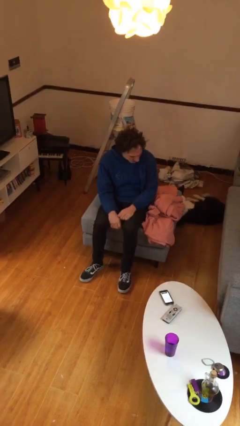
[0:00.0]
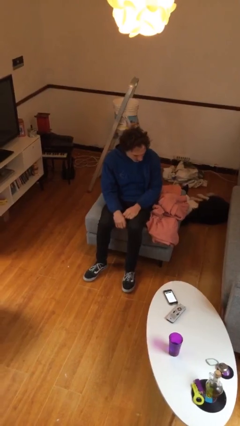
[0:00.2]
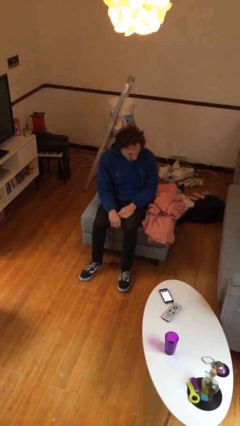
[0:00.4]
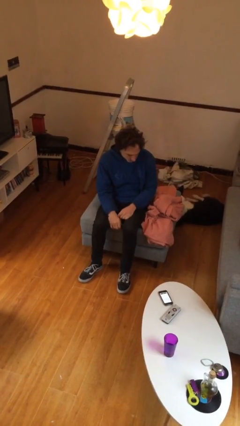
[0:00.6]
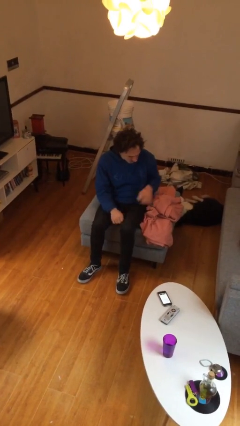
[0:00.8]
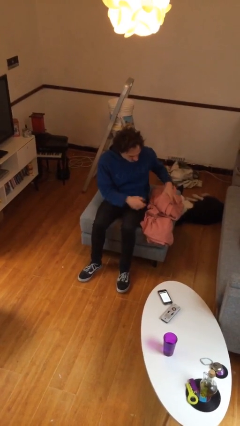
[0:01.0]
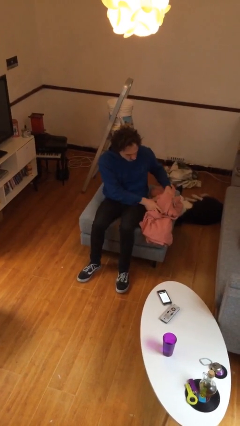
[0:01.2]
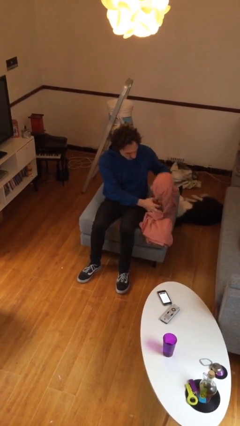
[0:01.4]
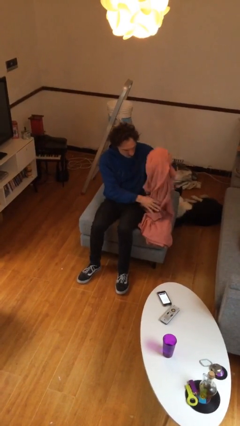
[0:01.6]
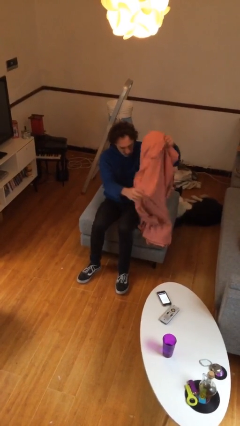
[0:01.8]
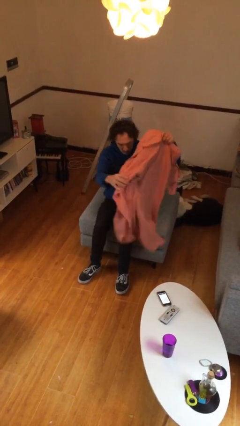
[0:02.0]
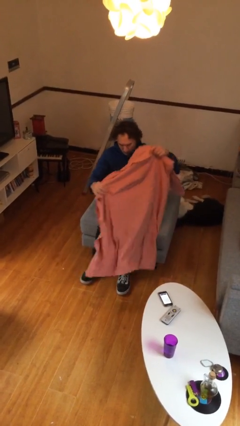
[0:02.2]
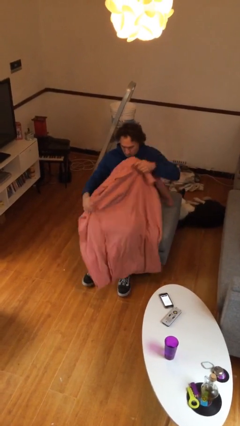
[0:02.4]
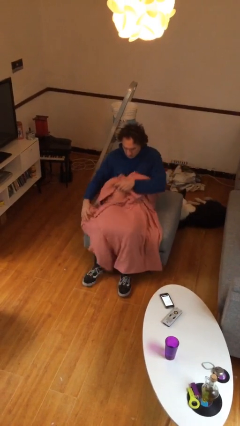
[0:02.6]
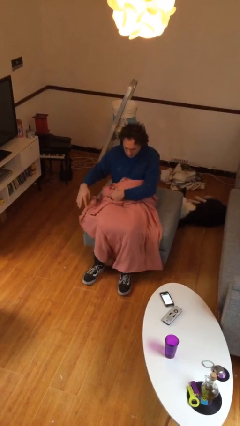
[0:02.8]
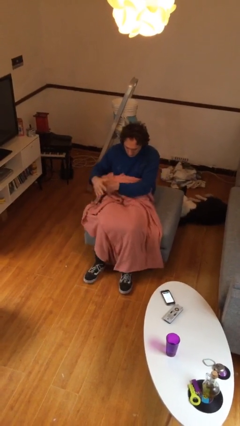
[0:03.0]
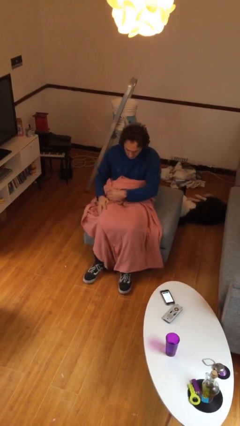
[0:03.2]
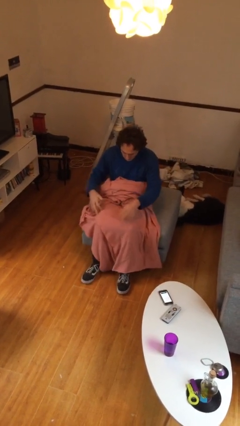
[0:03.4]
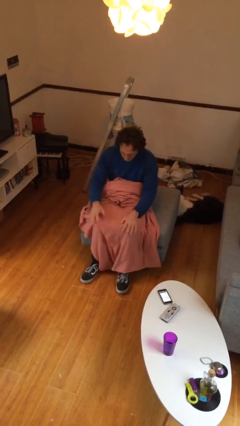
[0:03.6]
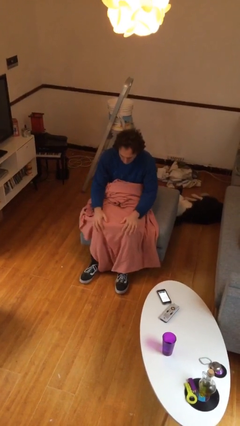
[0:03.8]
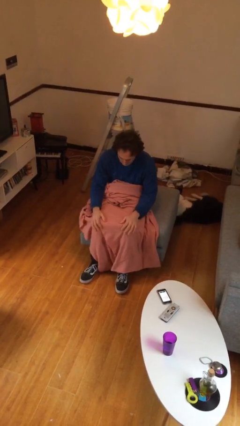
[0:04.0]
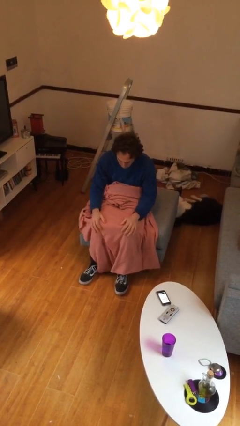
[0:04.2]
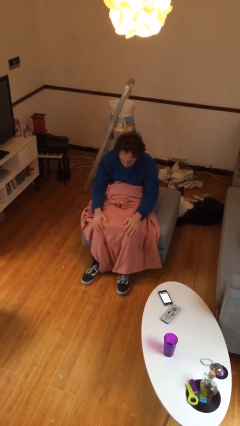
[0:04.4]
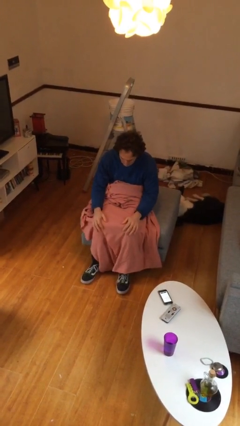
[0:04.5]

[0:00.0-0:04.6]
person covers with blanket

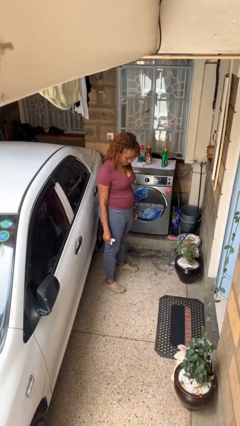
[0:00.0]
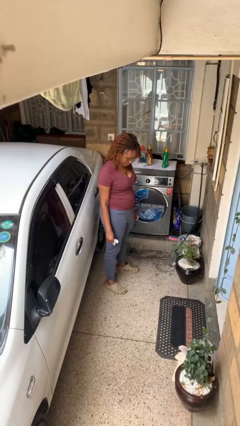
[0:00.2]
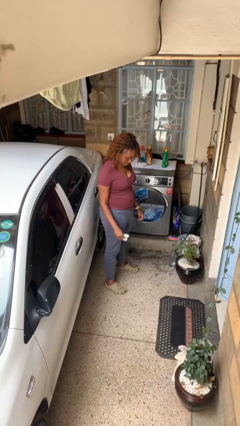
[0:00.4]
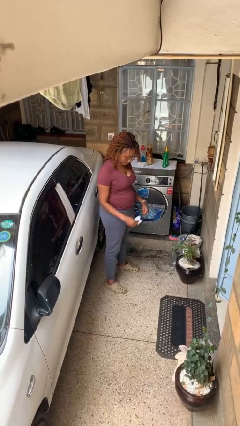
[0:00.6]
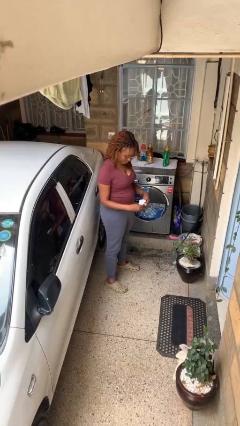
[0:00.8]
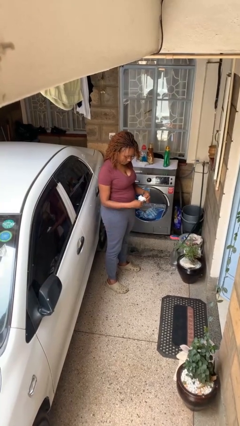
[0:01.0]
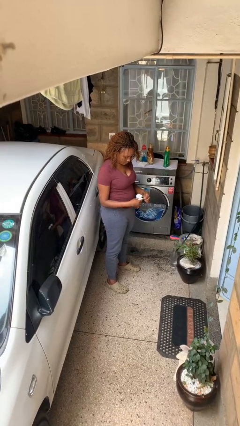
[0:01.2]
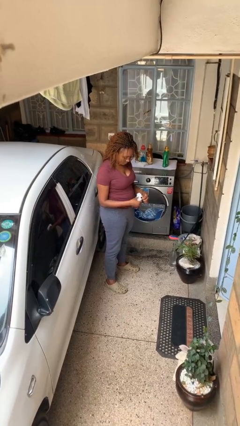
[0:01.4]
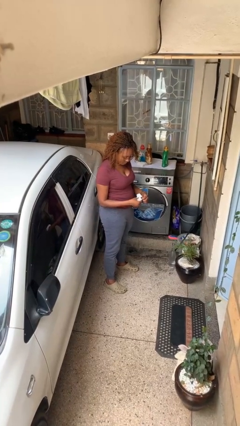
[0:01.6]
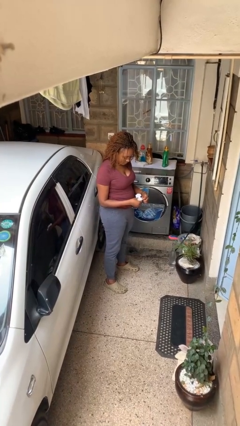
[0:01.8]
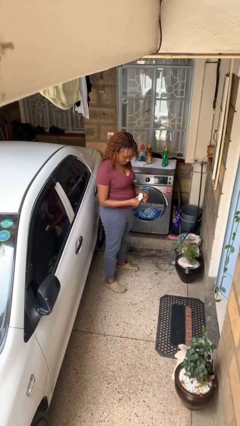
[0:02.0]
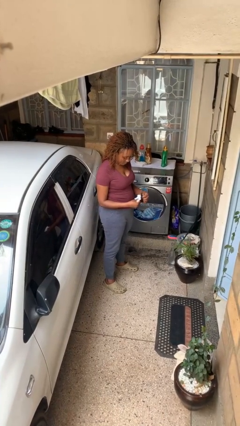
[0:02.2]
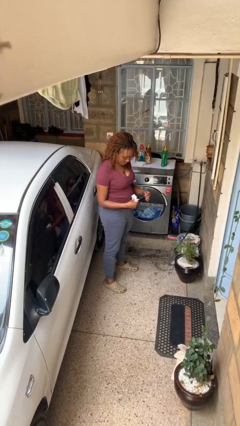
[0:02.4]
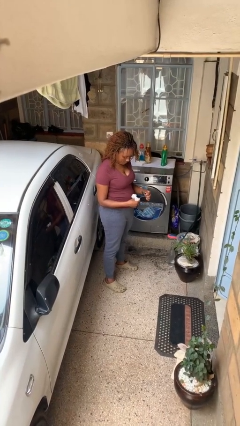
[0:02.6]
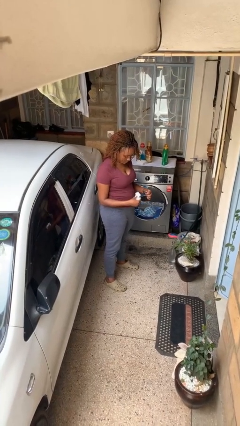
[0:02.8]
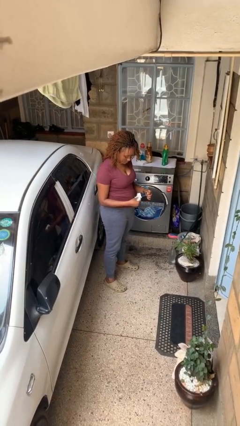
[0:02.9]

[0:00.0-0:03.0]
person cleans eyeglasses

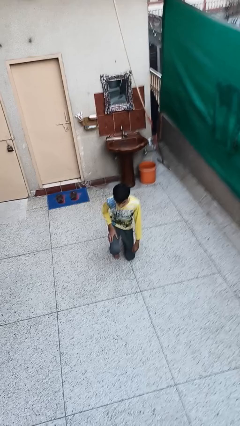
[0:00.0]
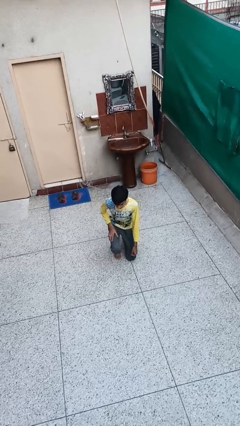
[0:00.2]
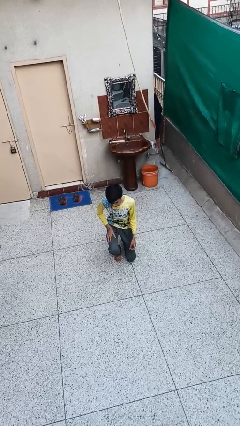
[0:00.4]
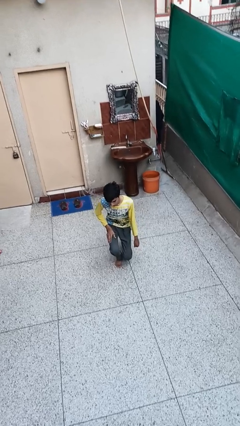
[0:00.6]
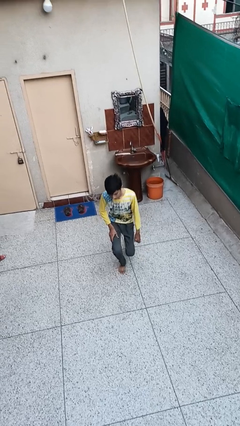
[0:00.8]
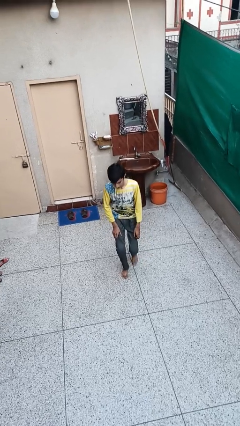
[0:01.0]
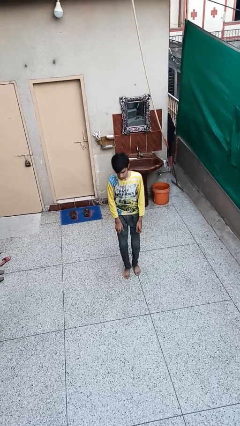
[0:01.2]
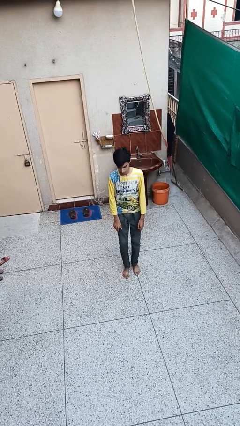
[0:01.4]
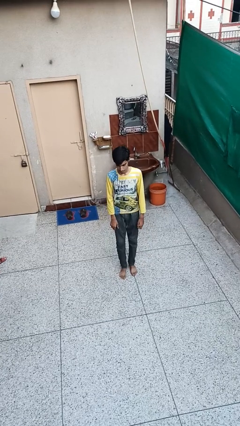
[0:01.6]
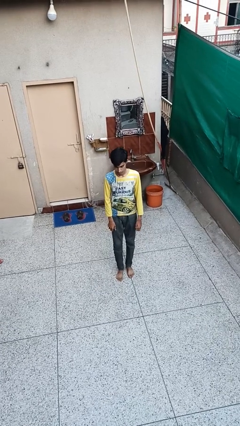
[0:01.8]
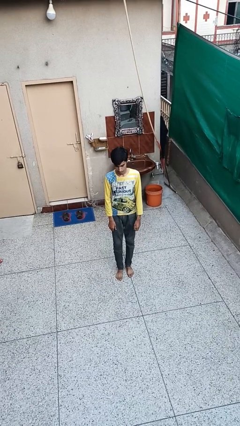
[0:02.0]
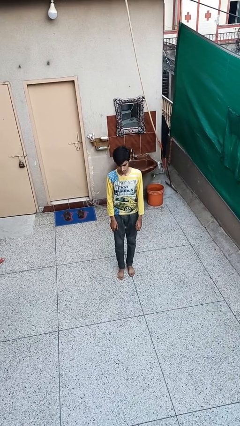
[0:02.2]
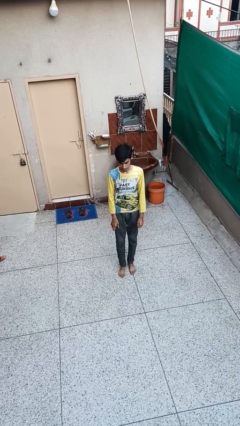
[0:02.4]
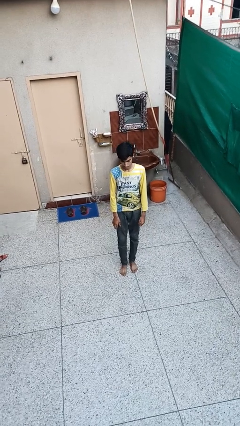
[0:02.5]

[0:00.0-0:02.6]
person stands up from floor

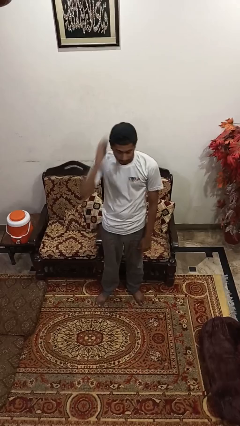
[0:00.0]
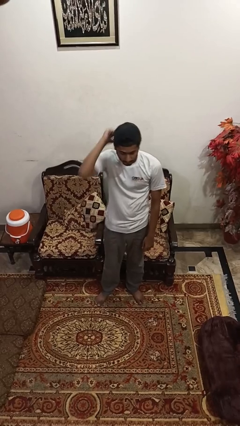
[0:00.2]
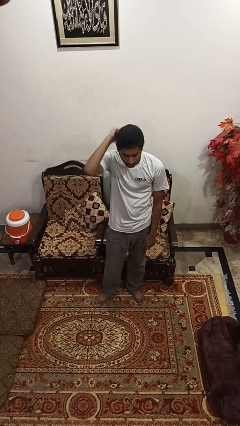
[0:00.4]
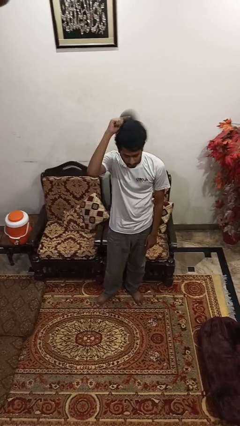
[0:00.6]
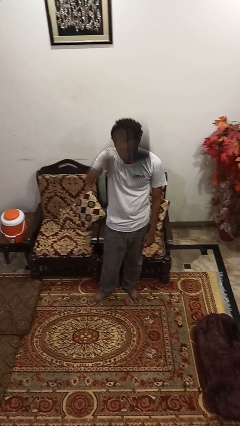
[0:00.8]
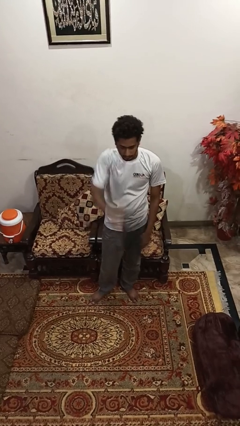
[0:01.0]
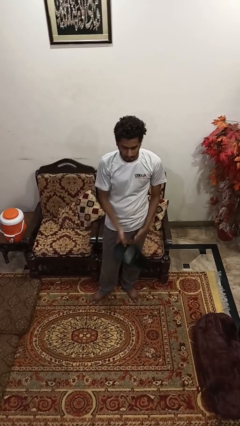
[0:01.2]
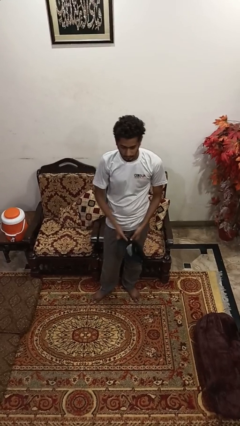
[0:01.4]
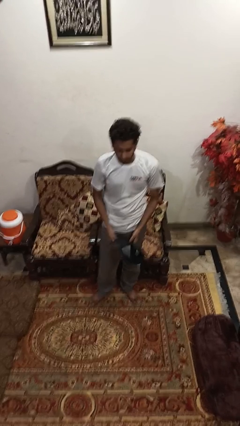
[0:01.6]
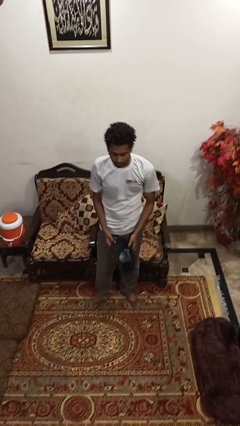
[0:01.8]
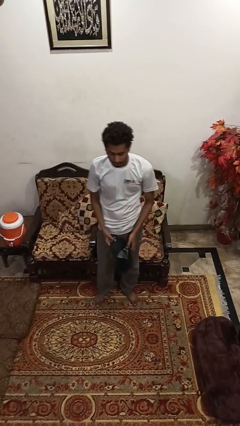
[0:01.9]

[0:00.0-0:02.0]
person takes off hat

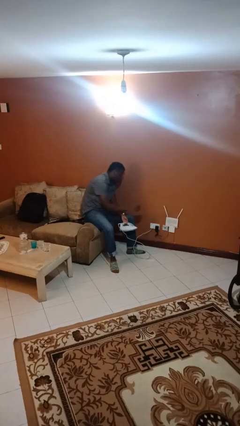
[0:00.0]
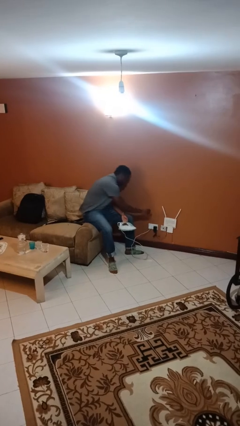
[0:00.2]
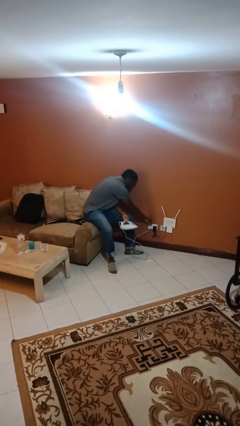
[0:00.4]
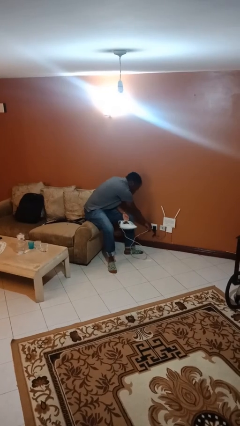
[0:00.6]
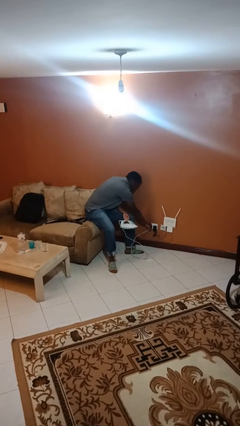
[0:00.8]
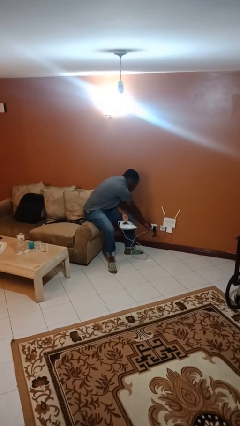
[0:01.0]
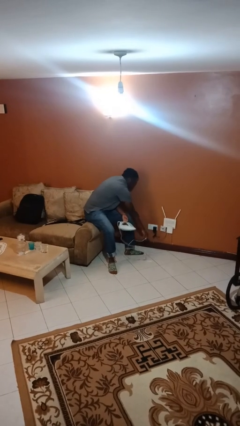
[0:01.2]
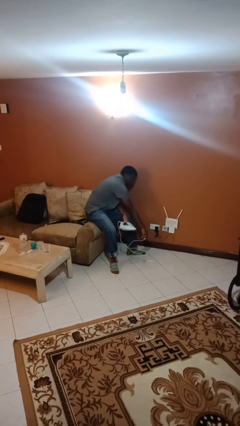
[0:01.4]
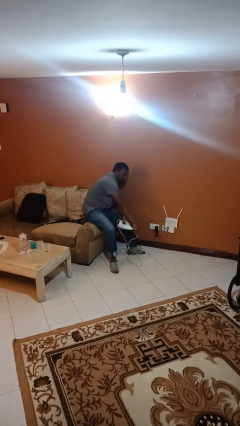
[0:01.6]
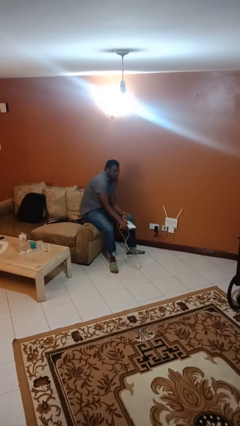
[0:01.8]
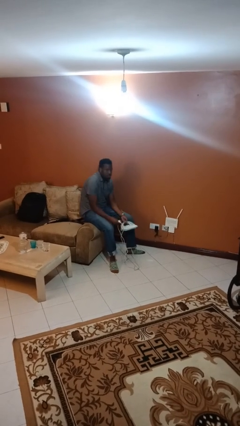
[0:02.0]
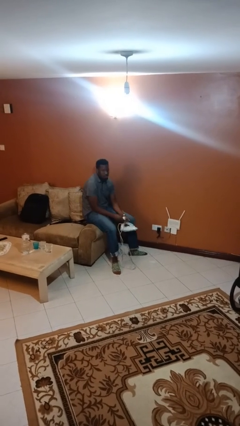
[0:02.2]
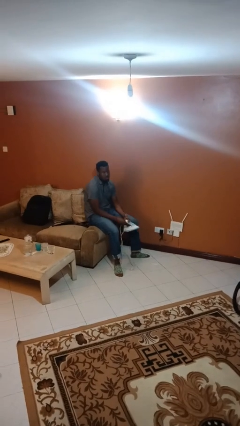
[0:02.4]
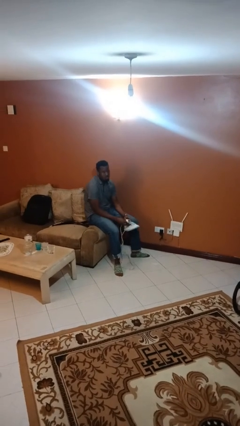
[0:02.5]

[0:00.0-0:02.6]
person unplugs from electrical socket

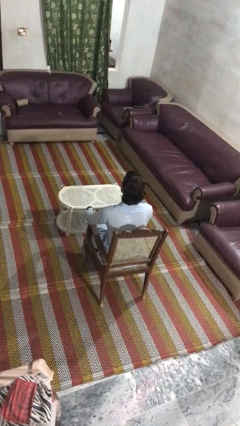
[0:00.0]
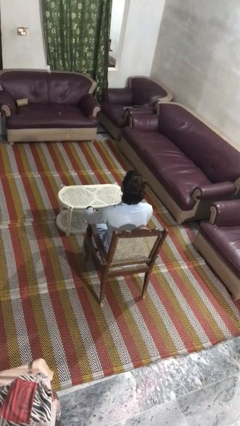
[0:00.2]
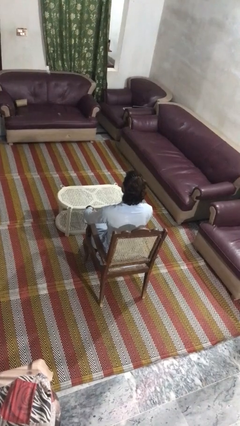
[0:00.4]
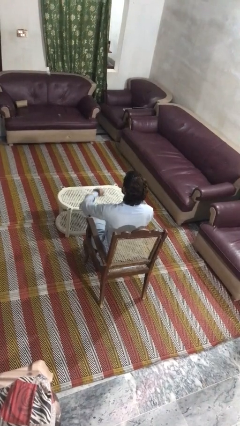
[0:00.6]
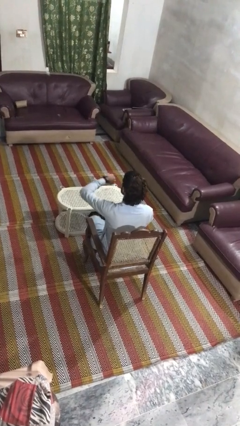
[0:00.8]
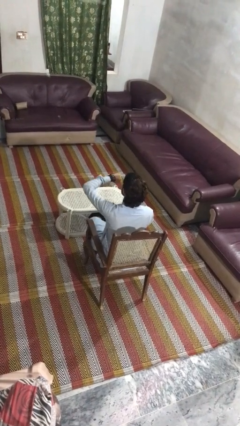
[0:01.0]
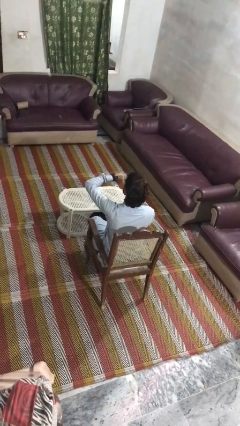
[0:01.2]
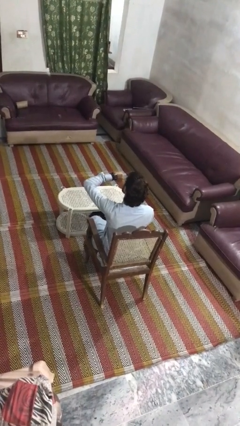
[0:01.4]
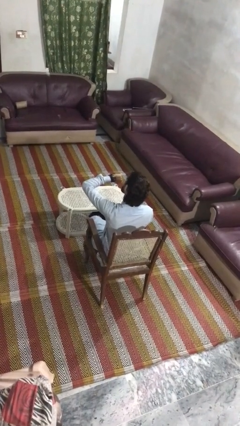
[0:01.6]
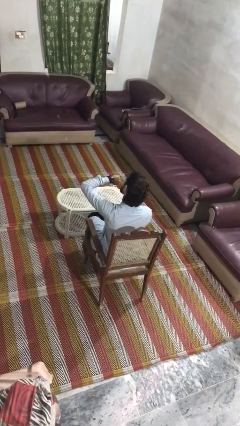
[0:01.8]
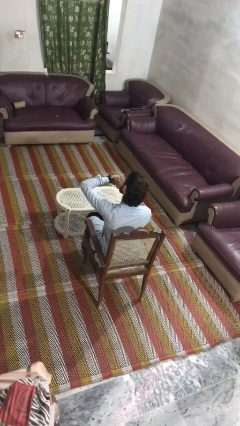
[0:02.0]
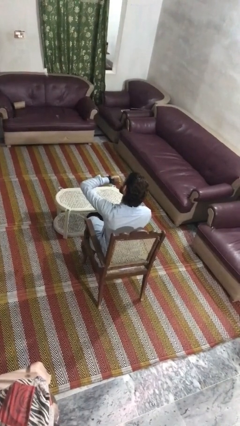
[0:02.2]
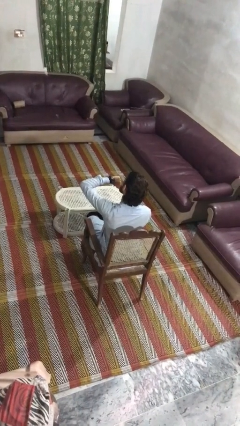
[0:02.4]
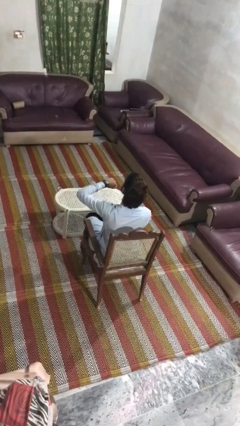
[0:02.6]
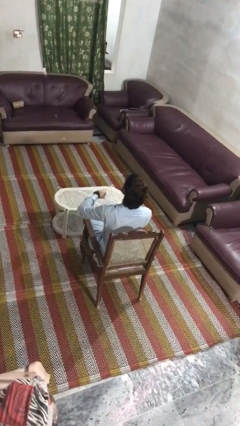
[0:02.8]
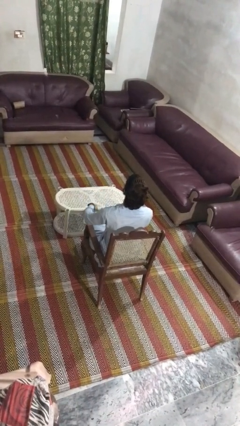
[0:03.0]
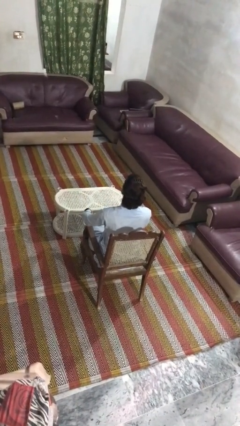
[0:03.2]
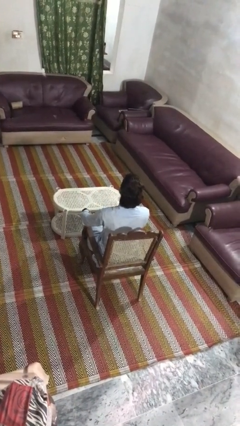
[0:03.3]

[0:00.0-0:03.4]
person looks at wristwatch
